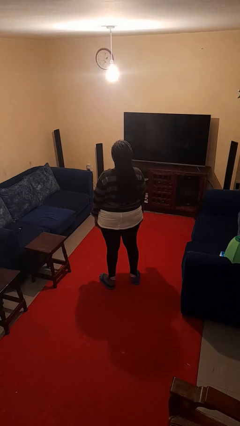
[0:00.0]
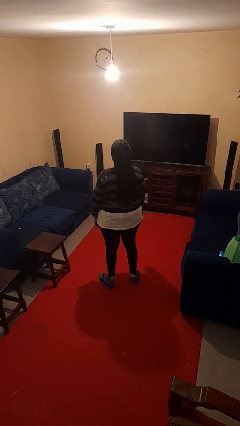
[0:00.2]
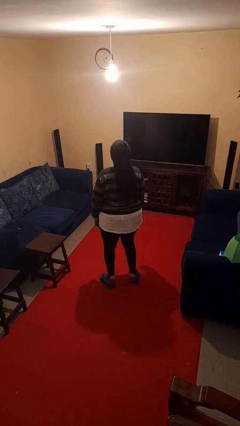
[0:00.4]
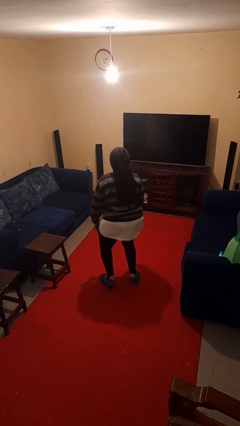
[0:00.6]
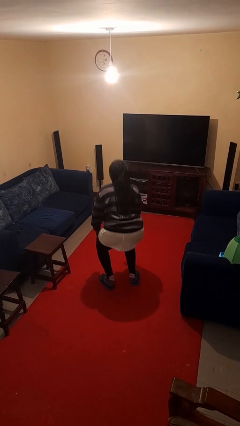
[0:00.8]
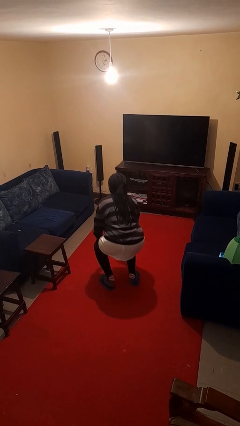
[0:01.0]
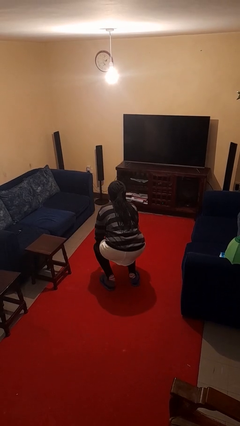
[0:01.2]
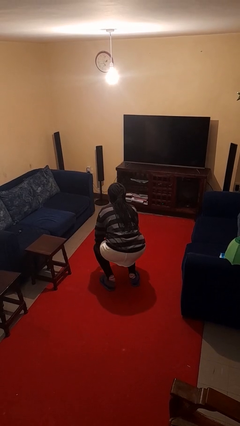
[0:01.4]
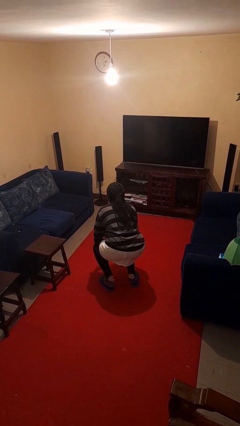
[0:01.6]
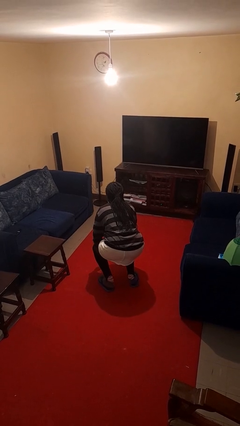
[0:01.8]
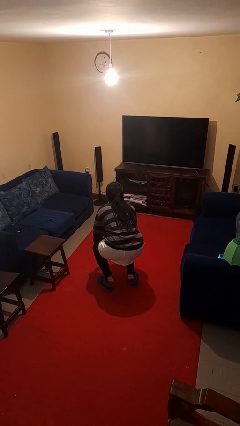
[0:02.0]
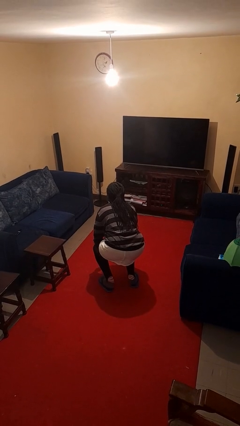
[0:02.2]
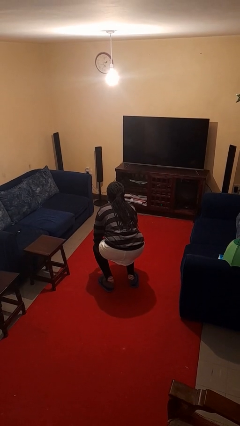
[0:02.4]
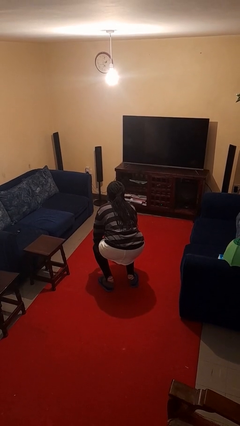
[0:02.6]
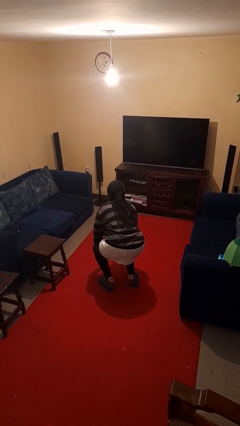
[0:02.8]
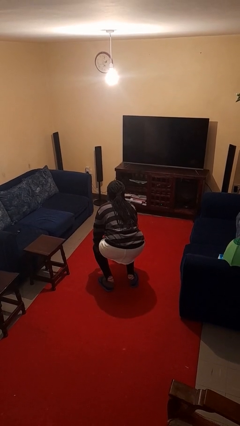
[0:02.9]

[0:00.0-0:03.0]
person squats

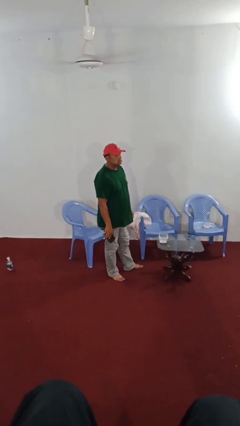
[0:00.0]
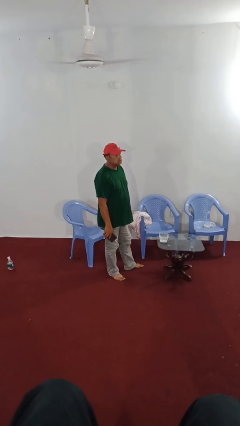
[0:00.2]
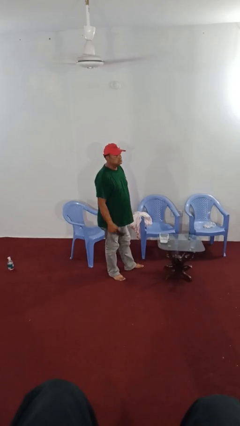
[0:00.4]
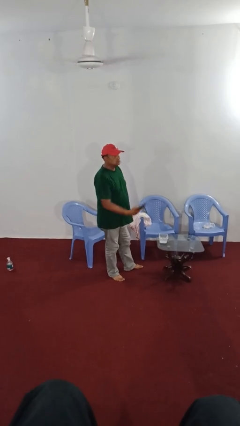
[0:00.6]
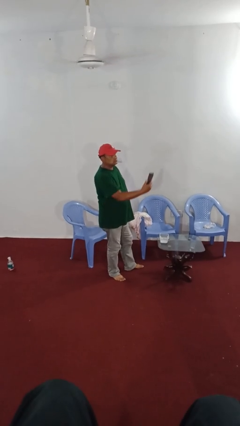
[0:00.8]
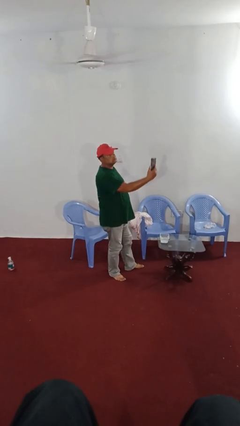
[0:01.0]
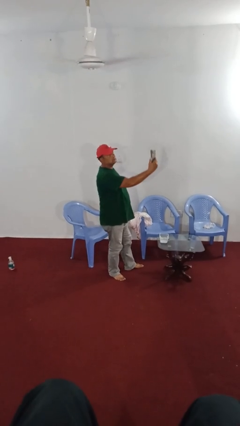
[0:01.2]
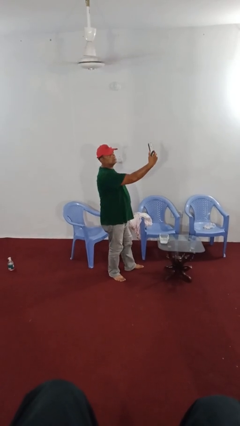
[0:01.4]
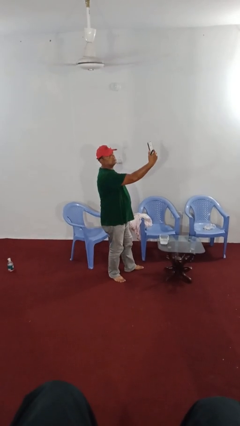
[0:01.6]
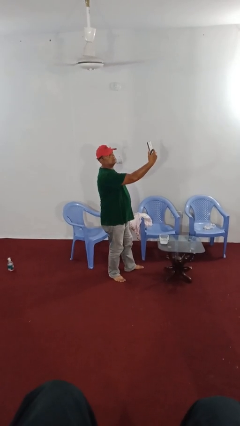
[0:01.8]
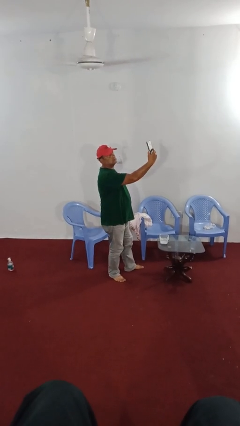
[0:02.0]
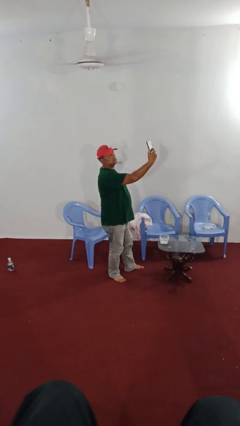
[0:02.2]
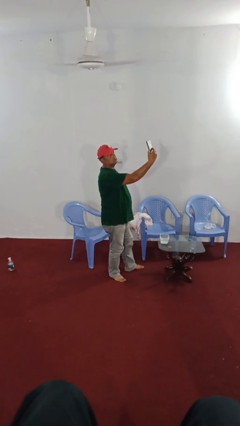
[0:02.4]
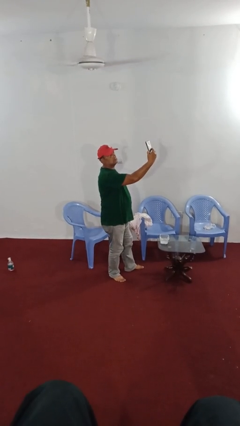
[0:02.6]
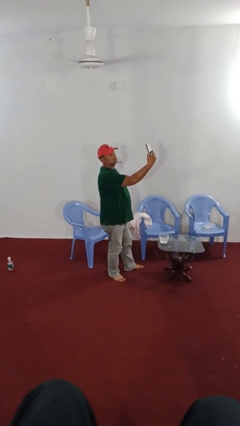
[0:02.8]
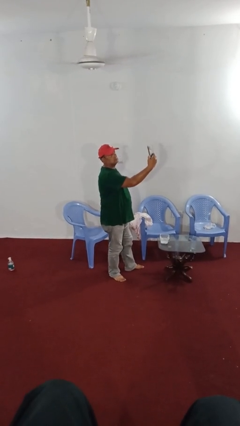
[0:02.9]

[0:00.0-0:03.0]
person takes selfie

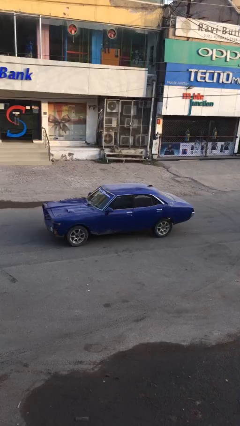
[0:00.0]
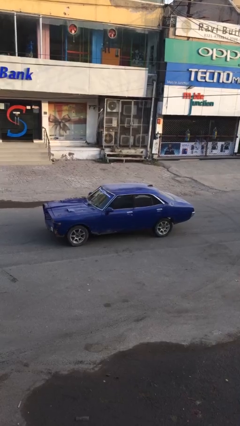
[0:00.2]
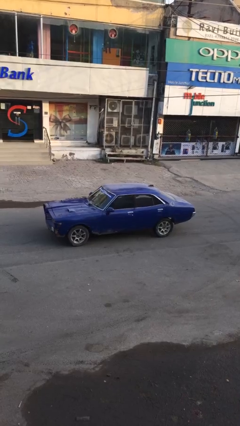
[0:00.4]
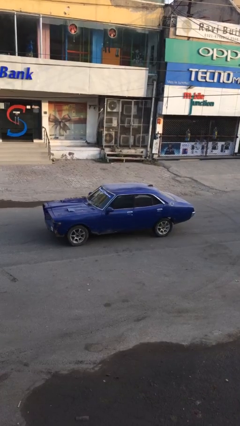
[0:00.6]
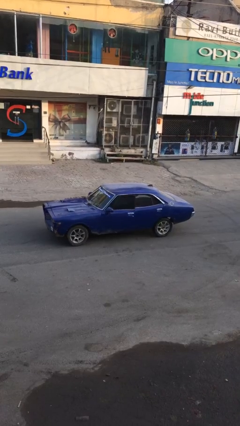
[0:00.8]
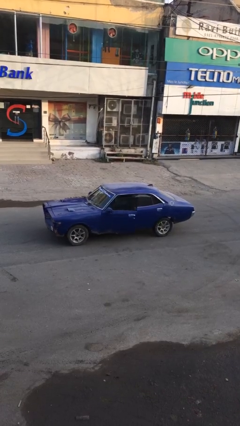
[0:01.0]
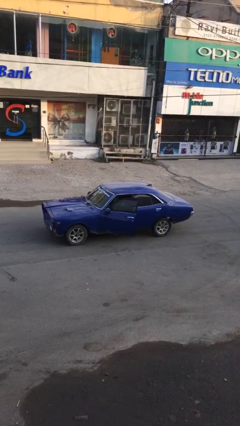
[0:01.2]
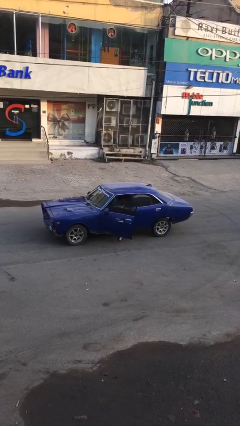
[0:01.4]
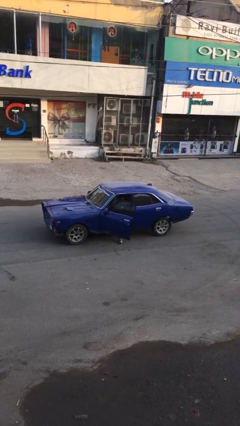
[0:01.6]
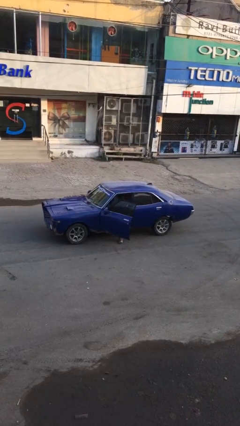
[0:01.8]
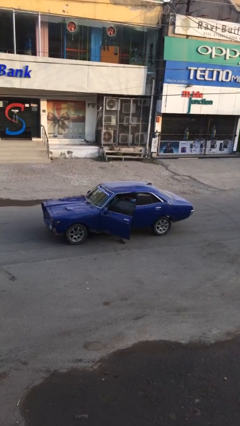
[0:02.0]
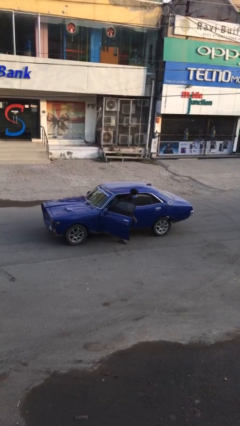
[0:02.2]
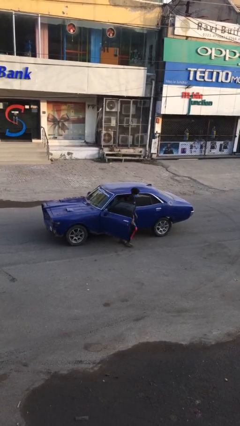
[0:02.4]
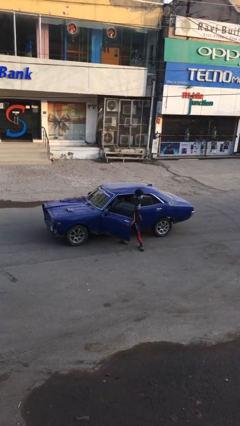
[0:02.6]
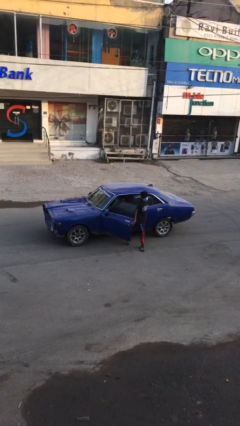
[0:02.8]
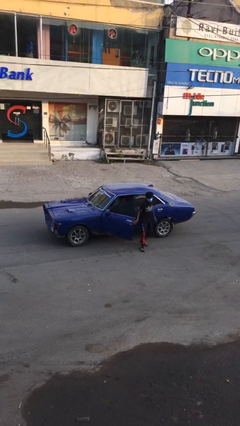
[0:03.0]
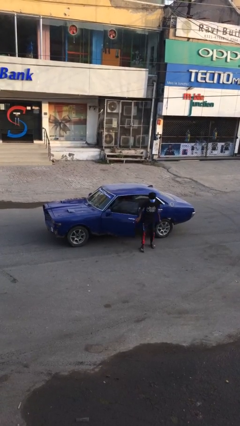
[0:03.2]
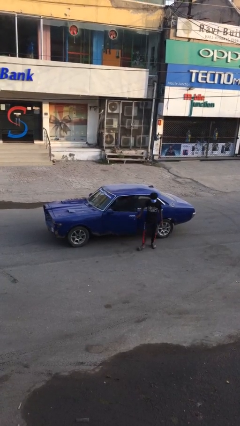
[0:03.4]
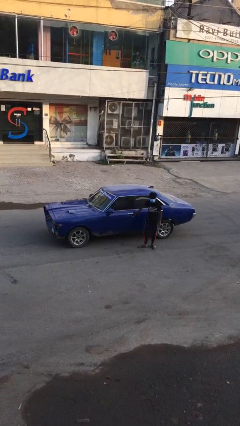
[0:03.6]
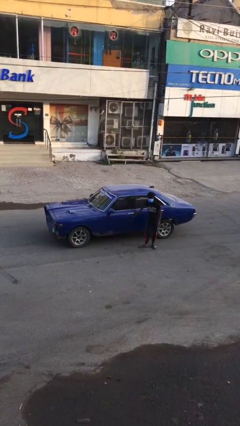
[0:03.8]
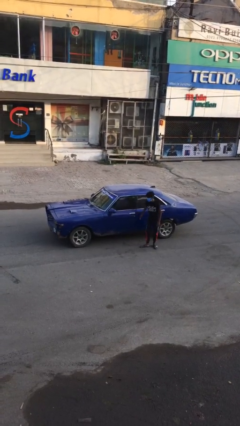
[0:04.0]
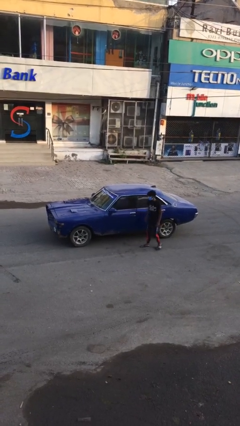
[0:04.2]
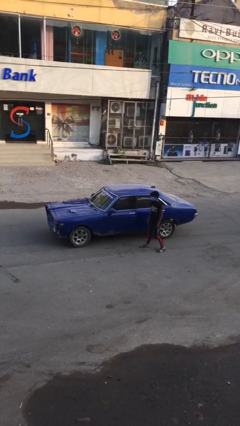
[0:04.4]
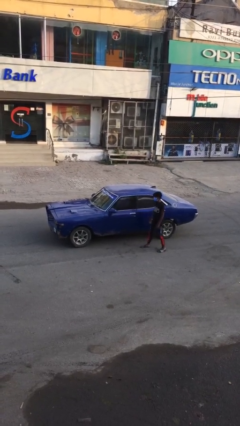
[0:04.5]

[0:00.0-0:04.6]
car drops off person

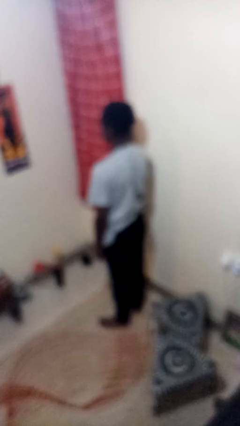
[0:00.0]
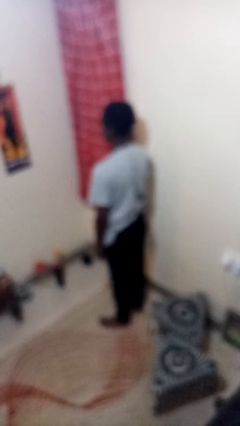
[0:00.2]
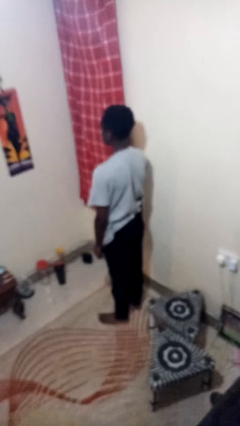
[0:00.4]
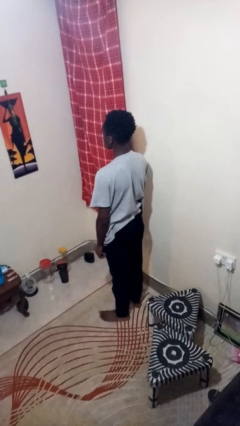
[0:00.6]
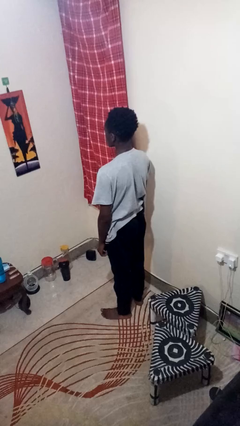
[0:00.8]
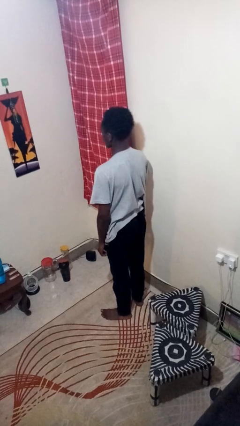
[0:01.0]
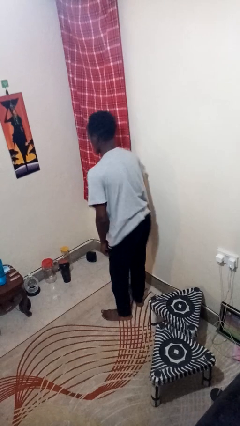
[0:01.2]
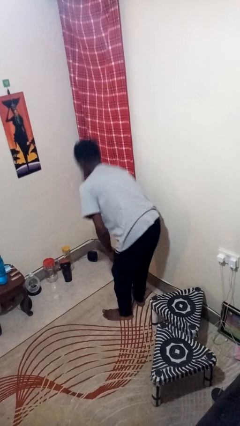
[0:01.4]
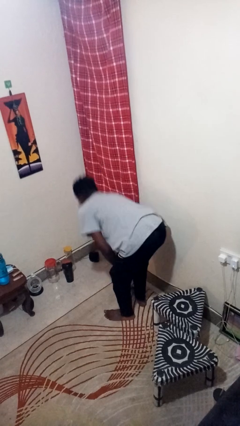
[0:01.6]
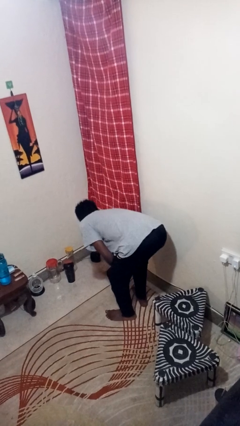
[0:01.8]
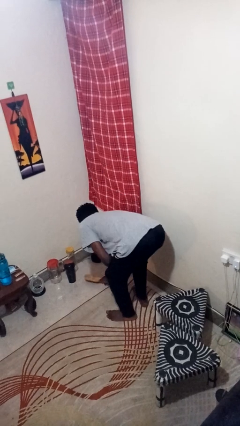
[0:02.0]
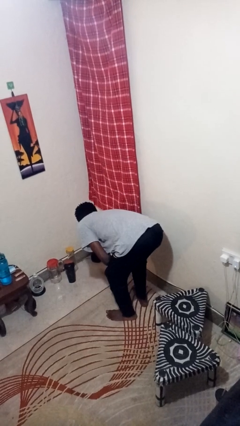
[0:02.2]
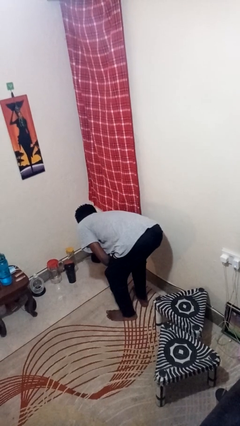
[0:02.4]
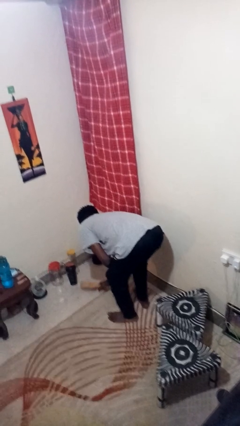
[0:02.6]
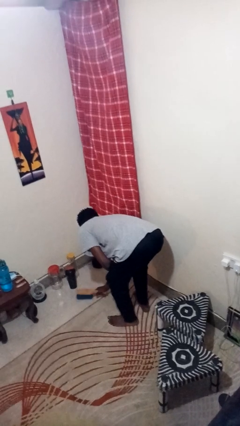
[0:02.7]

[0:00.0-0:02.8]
person sweeps floor

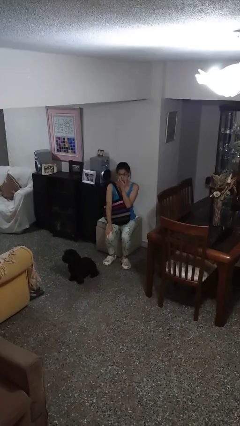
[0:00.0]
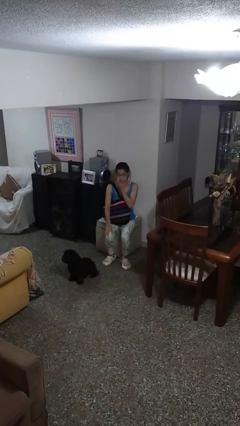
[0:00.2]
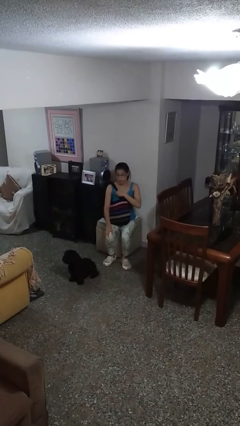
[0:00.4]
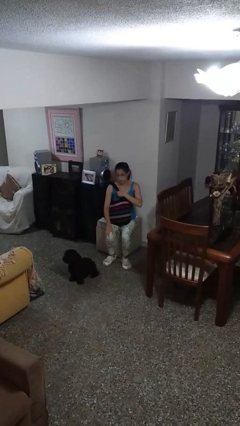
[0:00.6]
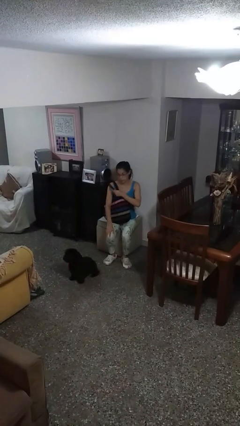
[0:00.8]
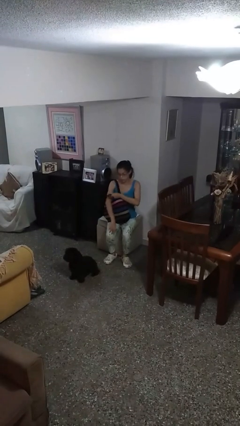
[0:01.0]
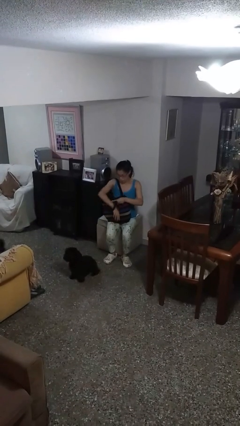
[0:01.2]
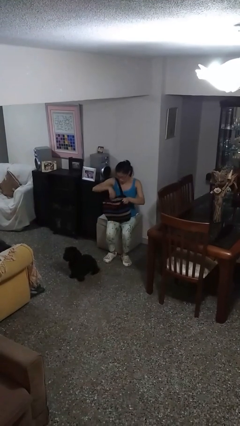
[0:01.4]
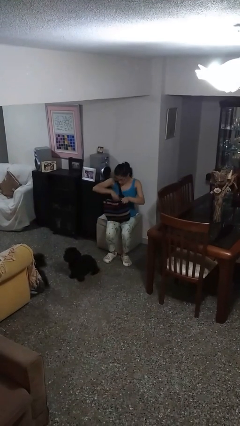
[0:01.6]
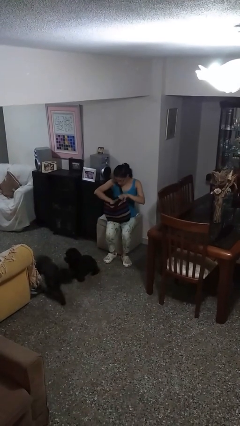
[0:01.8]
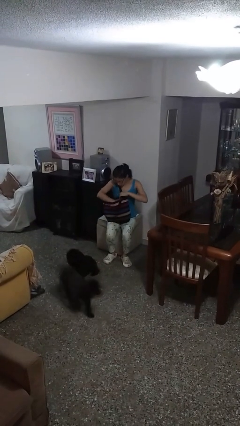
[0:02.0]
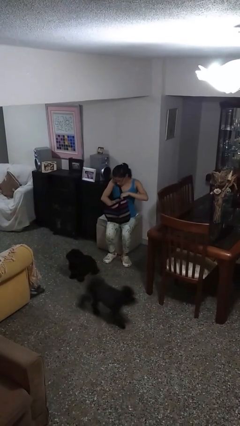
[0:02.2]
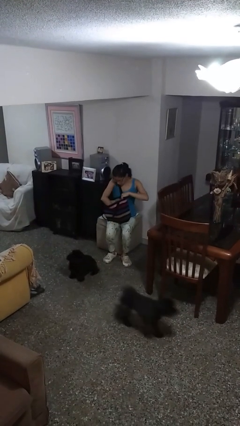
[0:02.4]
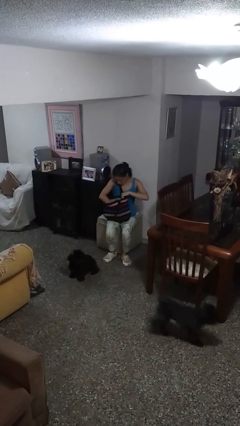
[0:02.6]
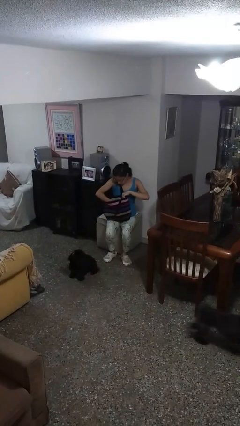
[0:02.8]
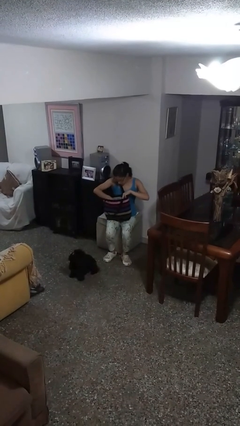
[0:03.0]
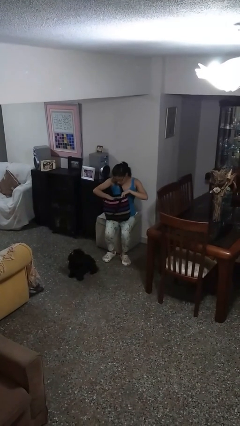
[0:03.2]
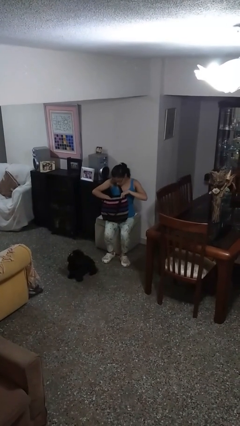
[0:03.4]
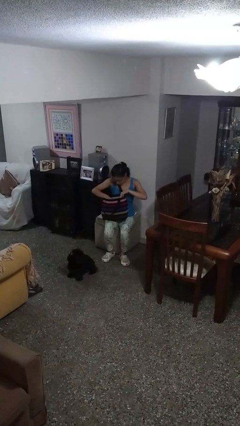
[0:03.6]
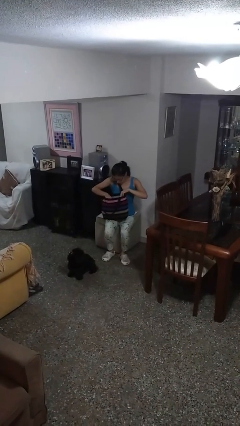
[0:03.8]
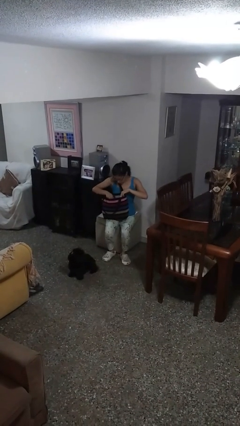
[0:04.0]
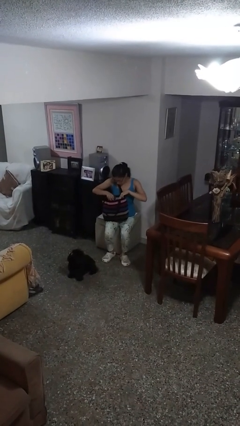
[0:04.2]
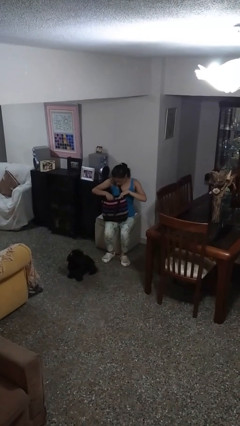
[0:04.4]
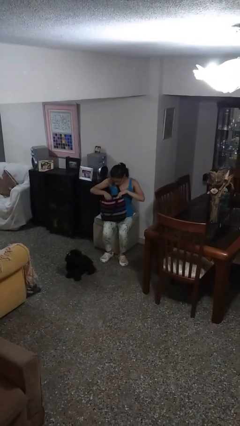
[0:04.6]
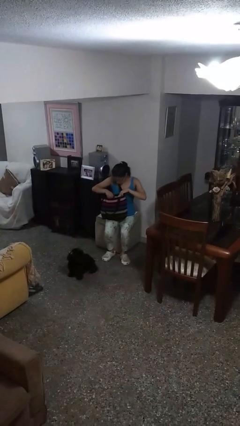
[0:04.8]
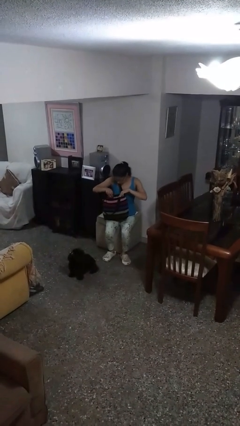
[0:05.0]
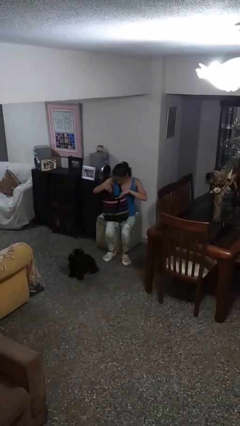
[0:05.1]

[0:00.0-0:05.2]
person searches in purse
